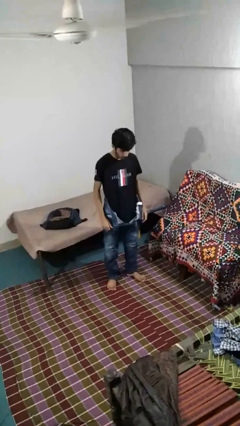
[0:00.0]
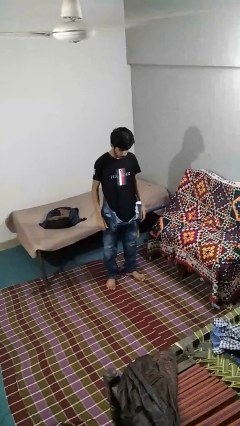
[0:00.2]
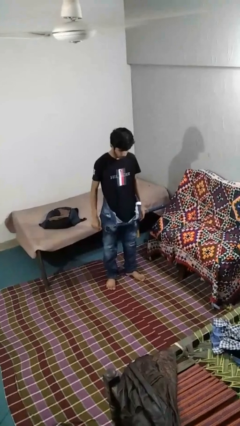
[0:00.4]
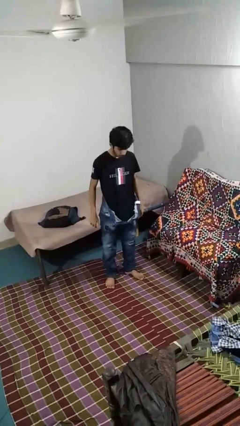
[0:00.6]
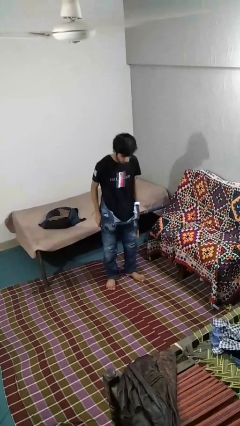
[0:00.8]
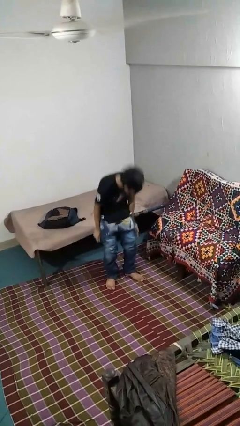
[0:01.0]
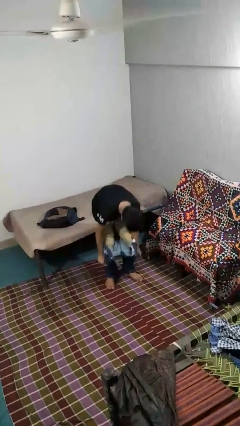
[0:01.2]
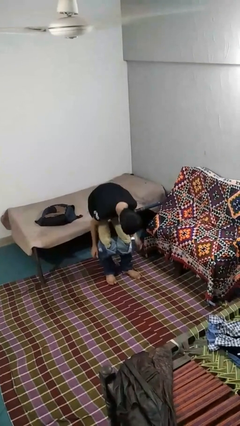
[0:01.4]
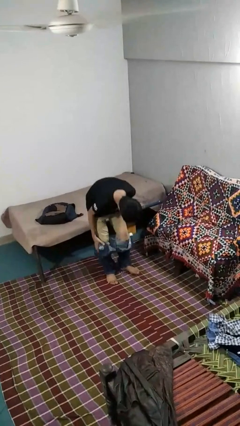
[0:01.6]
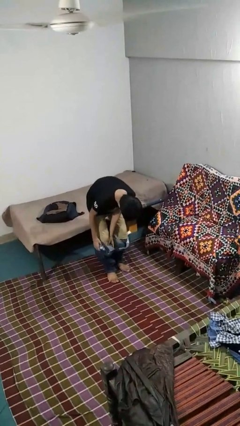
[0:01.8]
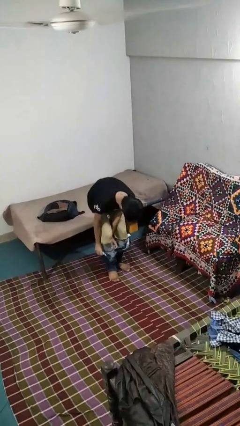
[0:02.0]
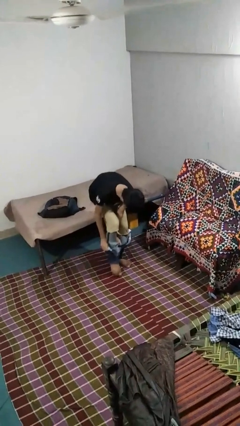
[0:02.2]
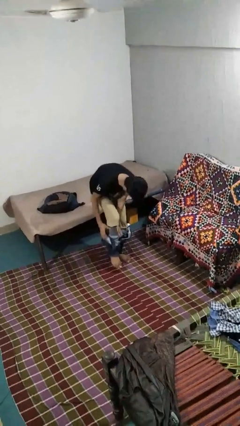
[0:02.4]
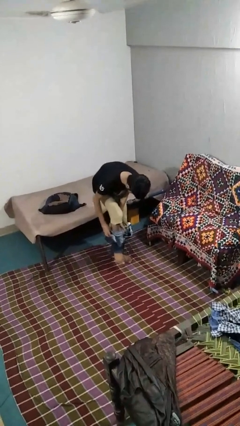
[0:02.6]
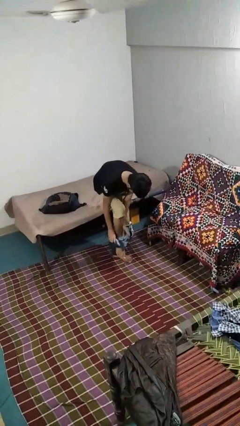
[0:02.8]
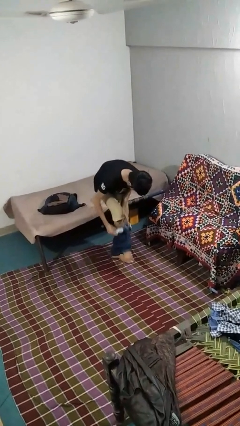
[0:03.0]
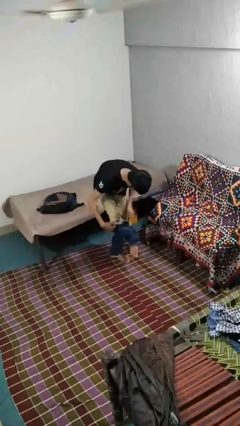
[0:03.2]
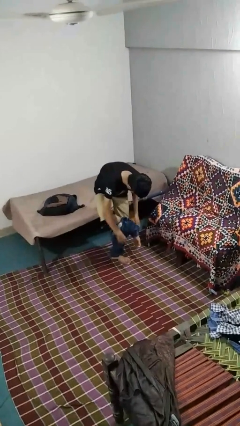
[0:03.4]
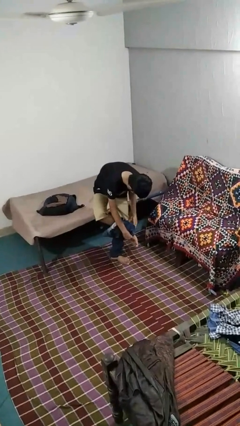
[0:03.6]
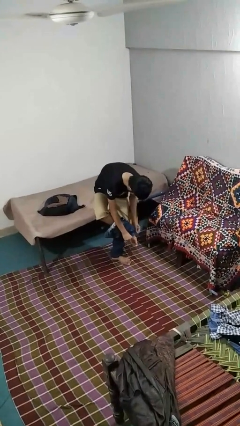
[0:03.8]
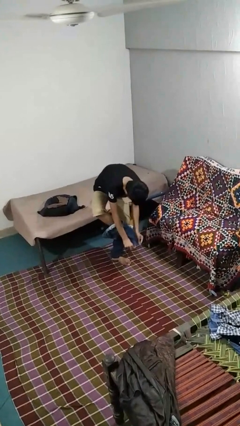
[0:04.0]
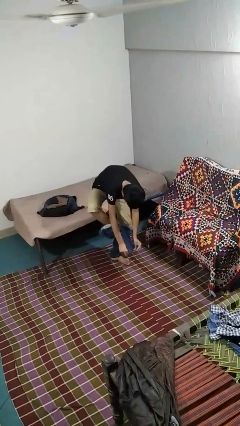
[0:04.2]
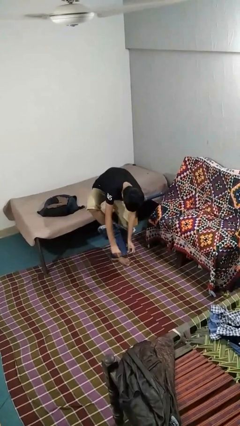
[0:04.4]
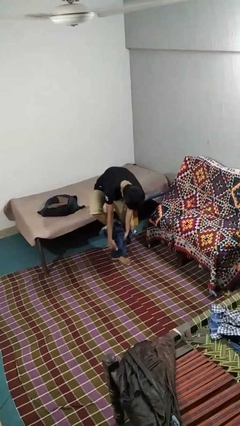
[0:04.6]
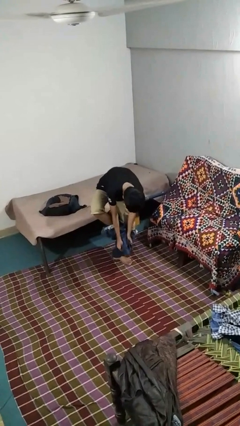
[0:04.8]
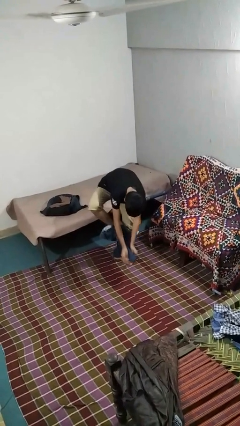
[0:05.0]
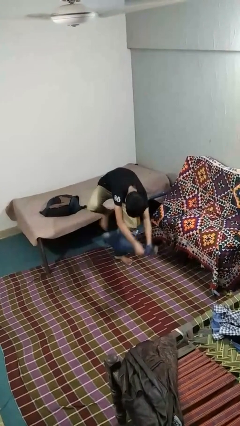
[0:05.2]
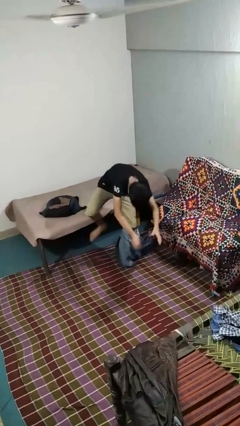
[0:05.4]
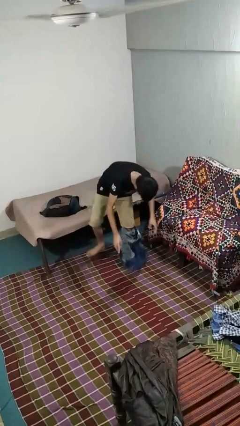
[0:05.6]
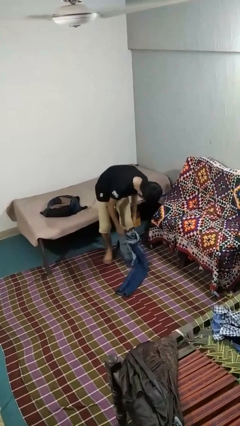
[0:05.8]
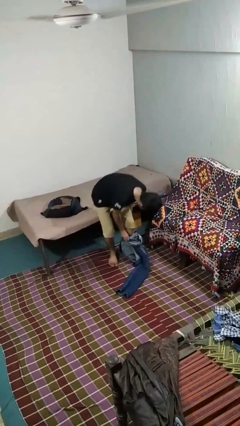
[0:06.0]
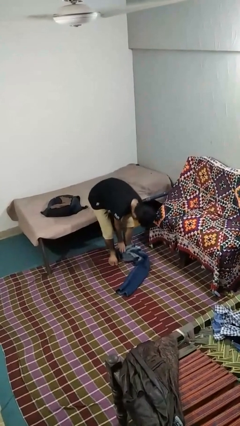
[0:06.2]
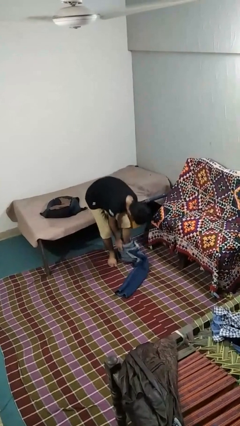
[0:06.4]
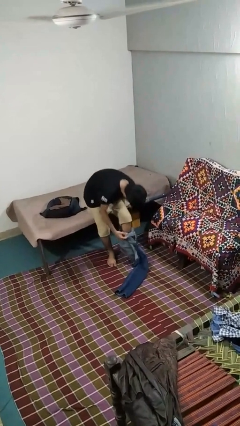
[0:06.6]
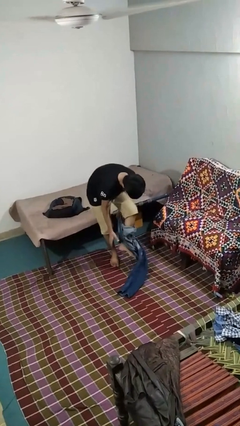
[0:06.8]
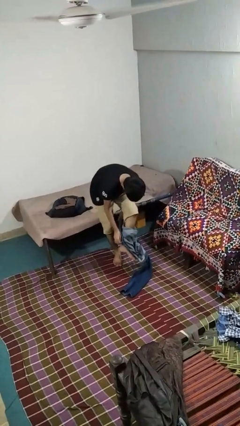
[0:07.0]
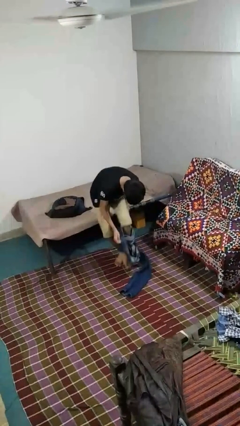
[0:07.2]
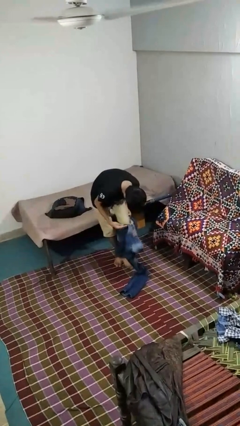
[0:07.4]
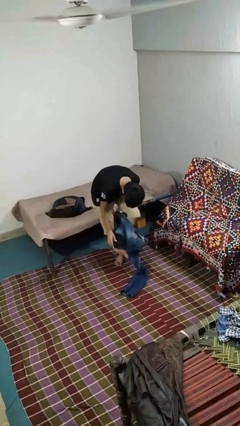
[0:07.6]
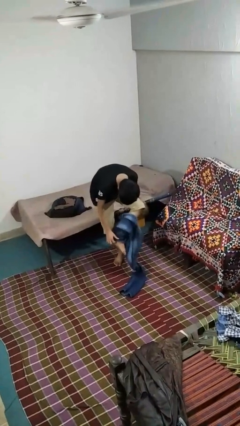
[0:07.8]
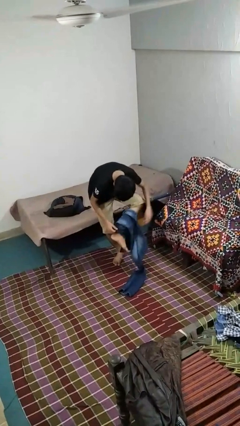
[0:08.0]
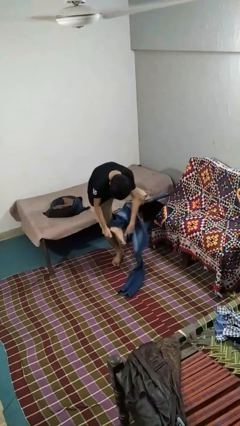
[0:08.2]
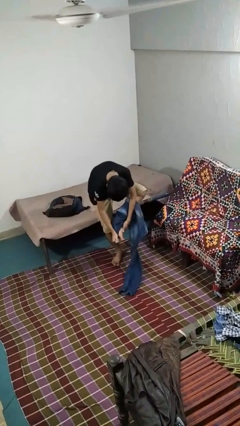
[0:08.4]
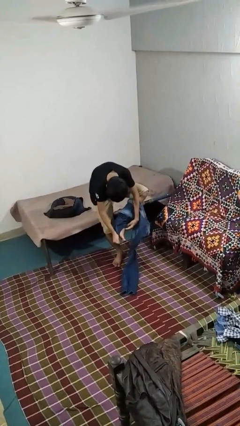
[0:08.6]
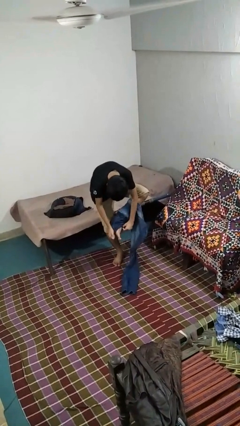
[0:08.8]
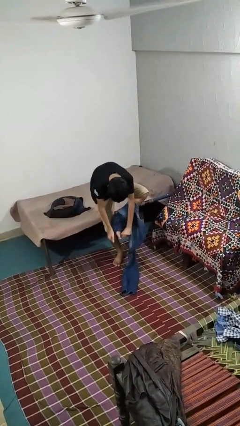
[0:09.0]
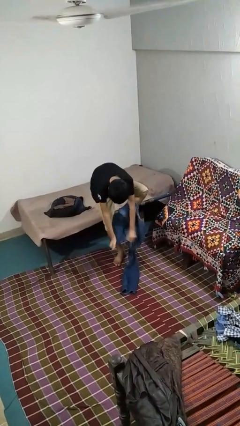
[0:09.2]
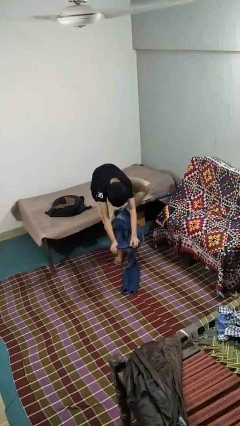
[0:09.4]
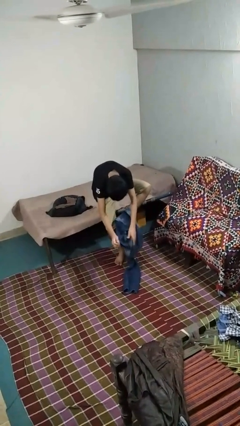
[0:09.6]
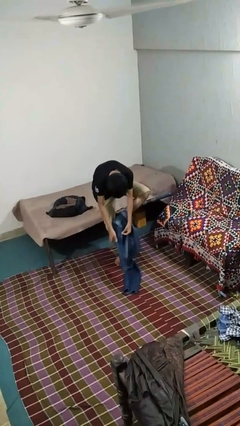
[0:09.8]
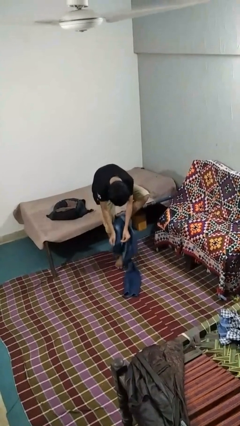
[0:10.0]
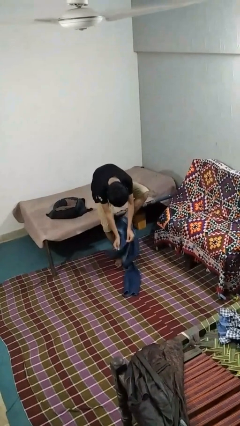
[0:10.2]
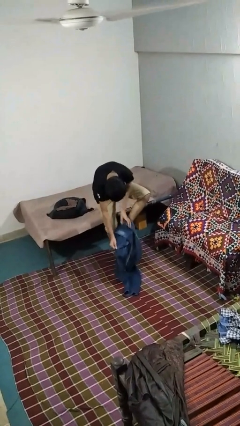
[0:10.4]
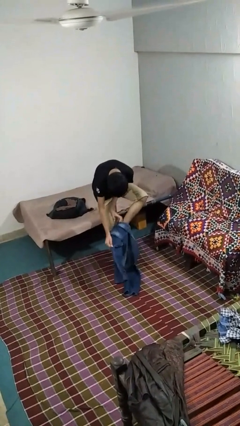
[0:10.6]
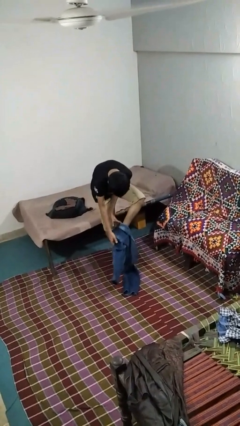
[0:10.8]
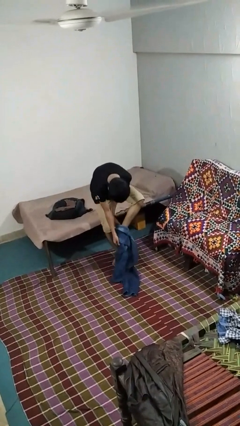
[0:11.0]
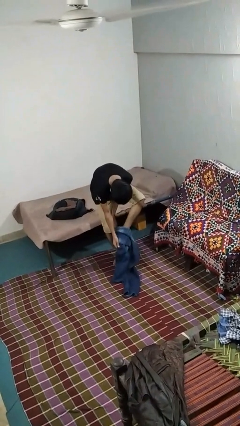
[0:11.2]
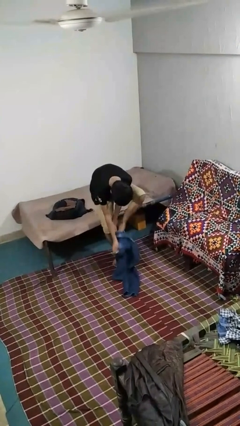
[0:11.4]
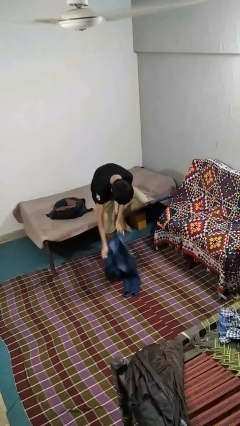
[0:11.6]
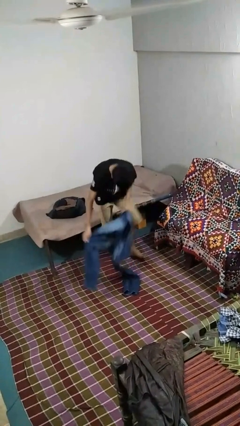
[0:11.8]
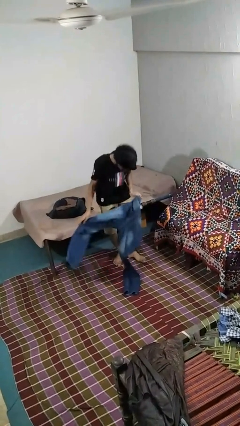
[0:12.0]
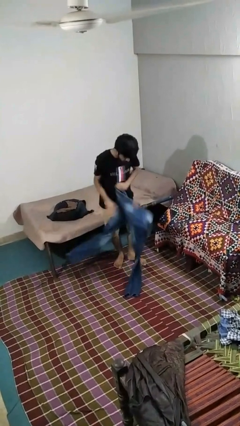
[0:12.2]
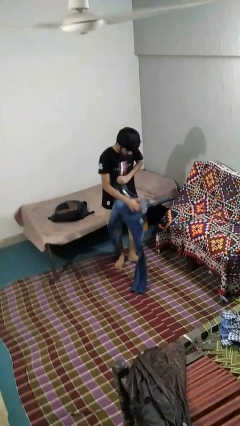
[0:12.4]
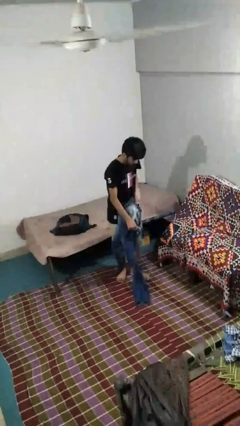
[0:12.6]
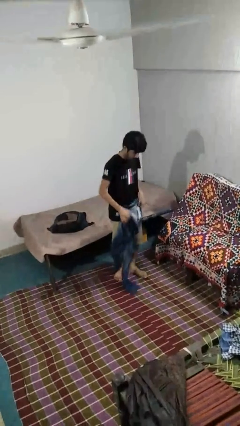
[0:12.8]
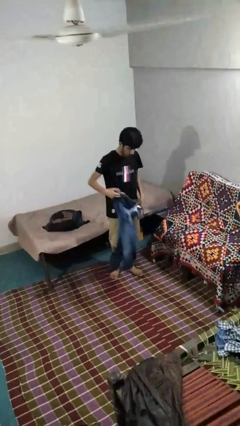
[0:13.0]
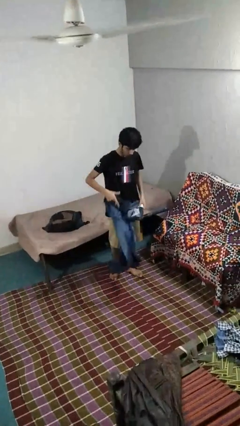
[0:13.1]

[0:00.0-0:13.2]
person takes off pants

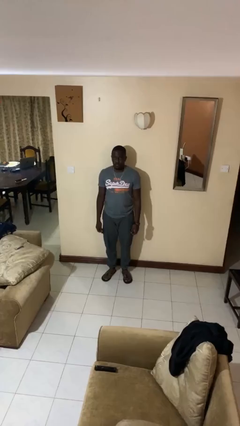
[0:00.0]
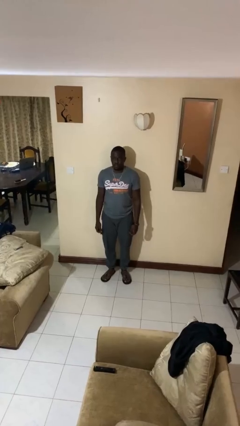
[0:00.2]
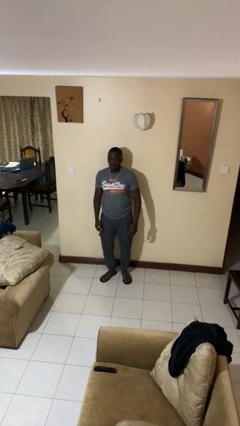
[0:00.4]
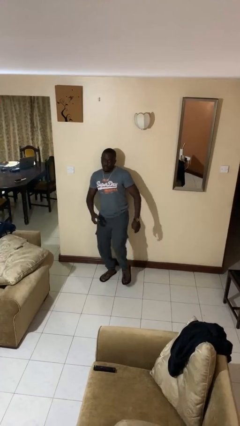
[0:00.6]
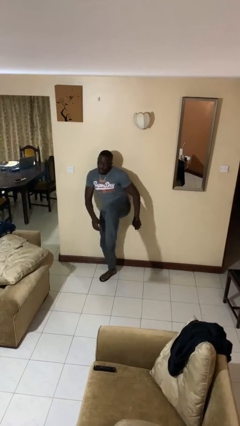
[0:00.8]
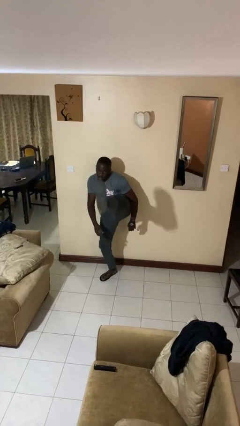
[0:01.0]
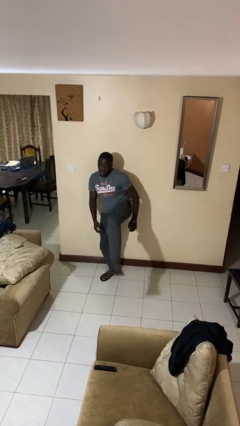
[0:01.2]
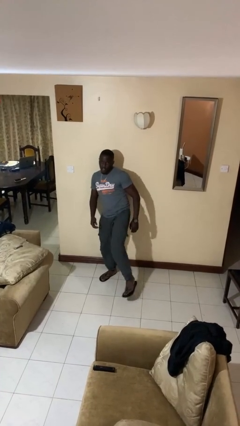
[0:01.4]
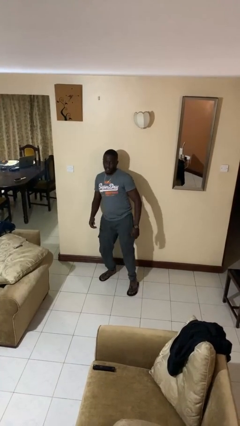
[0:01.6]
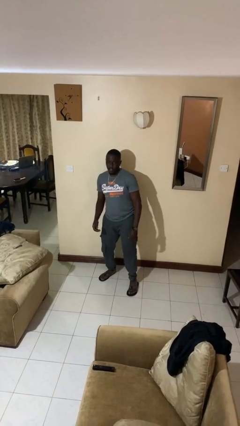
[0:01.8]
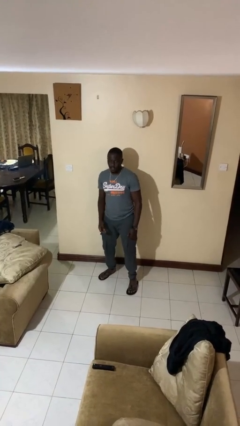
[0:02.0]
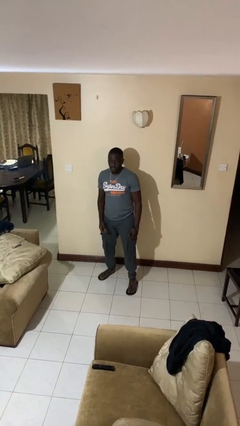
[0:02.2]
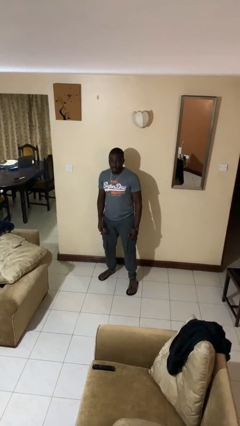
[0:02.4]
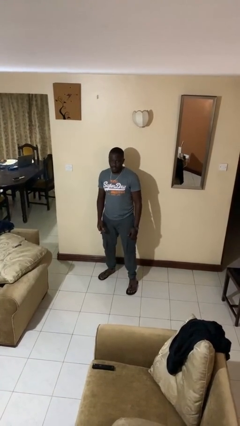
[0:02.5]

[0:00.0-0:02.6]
person karate kicks

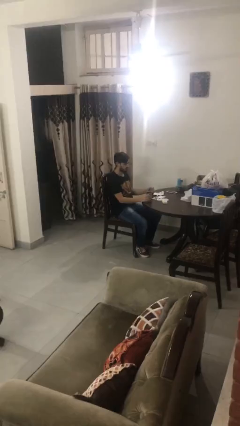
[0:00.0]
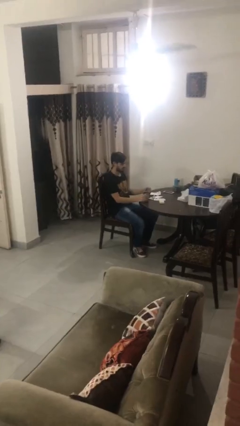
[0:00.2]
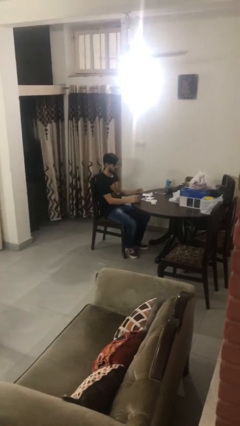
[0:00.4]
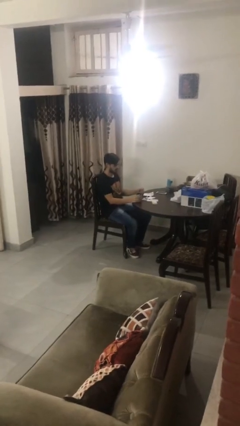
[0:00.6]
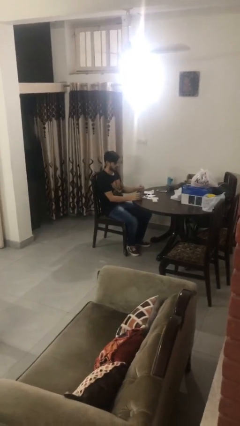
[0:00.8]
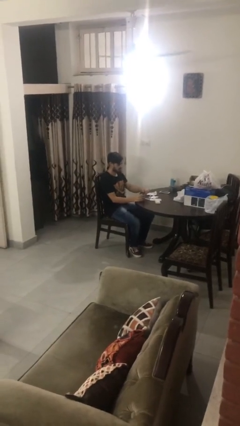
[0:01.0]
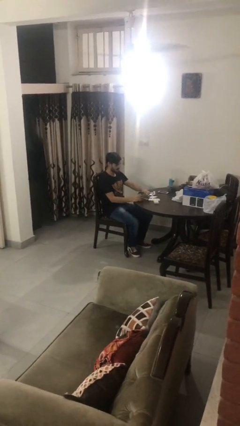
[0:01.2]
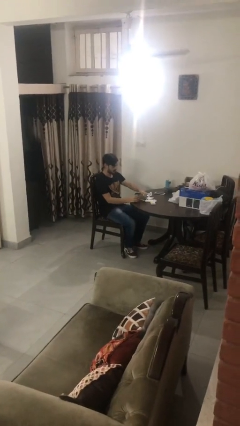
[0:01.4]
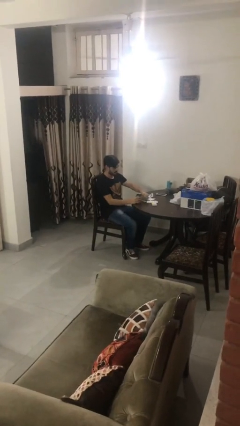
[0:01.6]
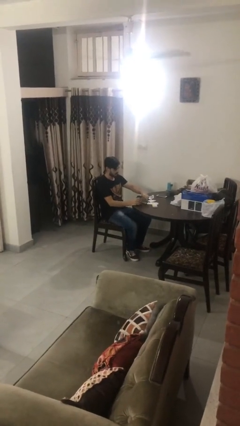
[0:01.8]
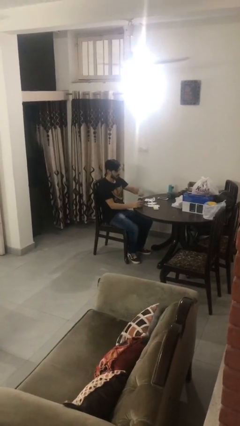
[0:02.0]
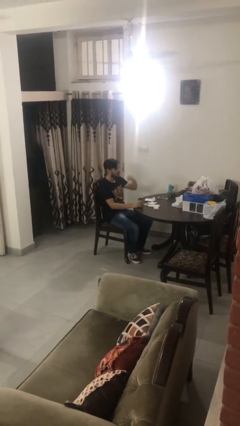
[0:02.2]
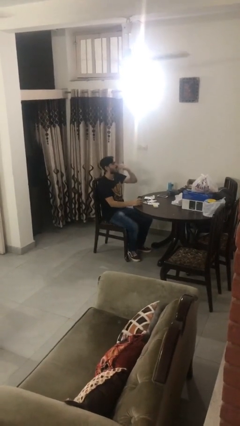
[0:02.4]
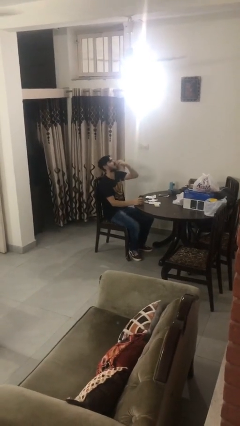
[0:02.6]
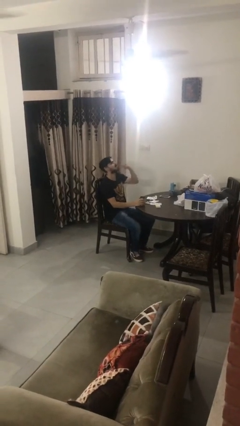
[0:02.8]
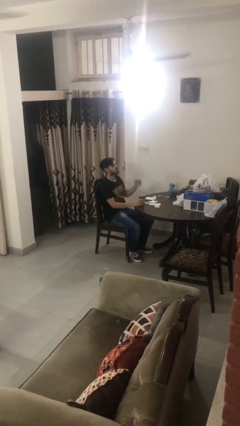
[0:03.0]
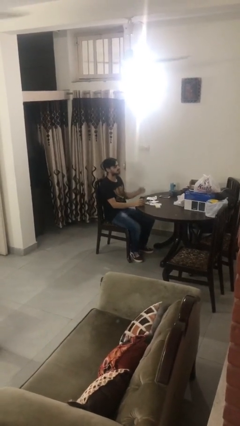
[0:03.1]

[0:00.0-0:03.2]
person takes medicine pills
